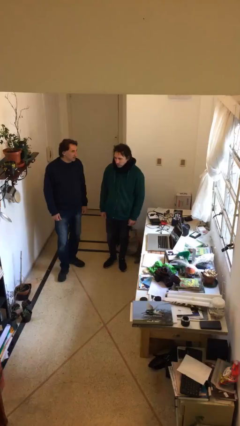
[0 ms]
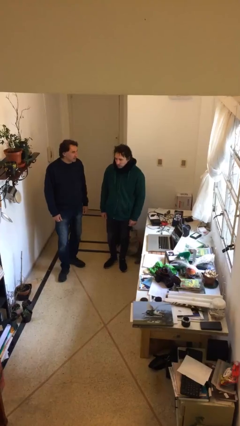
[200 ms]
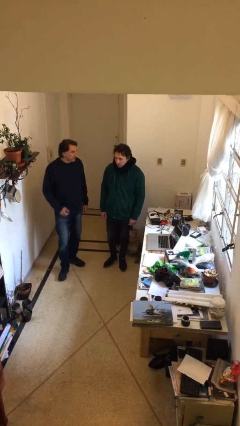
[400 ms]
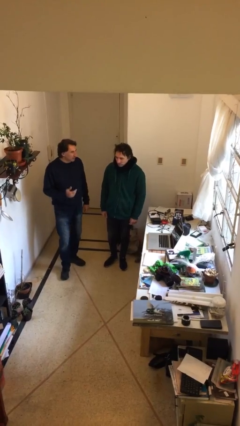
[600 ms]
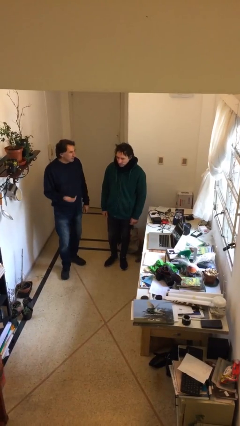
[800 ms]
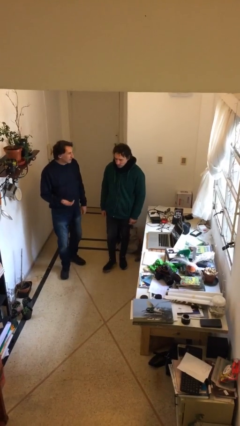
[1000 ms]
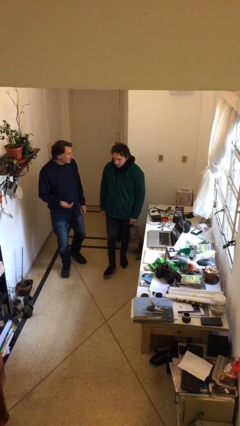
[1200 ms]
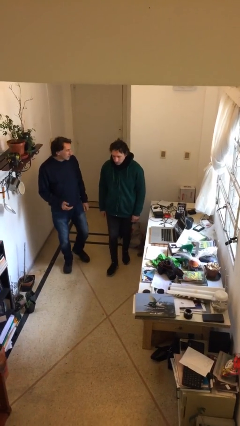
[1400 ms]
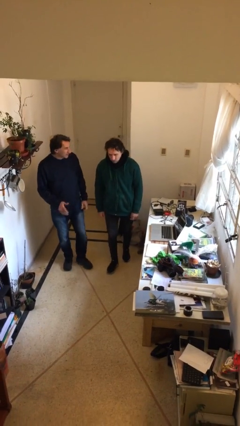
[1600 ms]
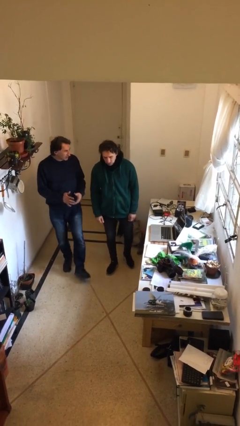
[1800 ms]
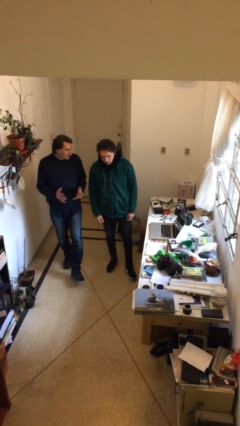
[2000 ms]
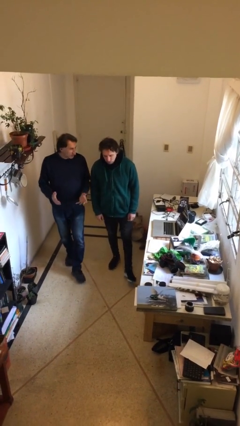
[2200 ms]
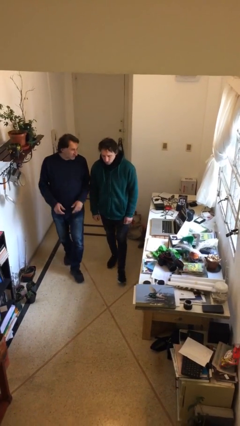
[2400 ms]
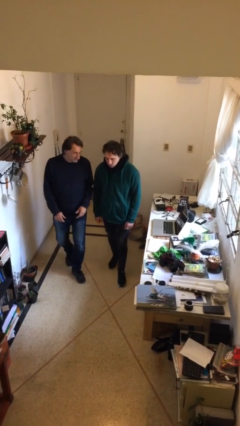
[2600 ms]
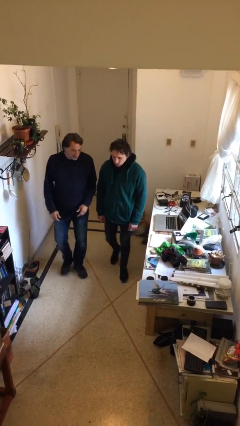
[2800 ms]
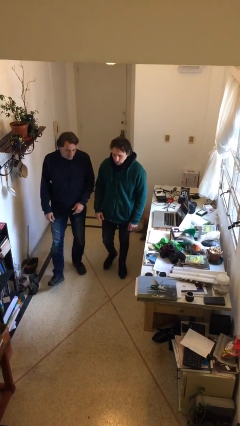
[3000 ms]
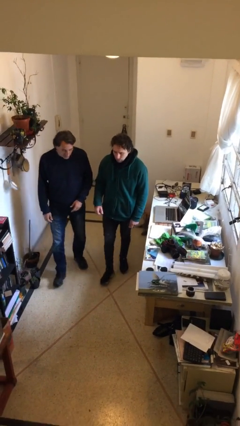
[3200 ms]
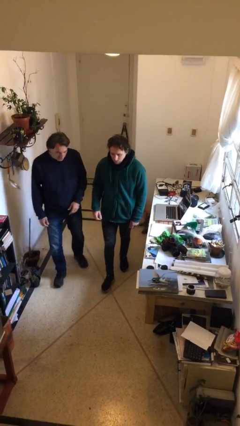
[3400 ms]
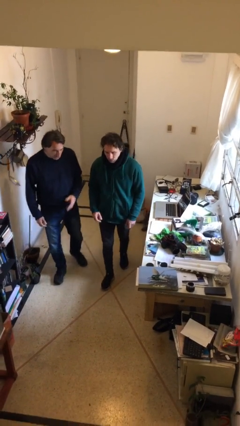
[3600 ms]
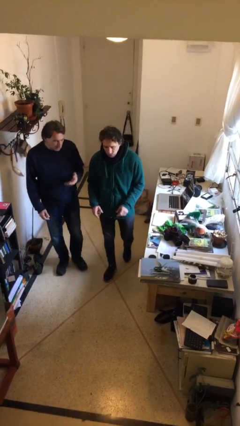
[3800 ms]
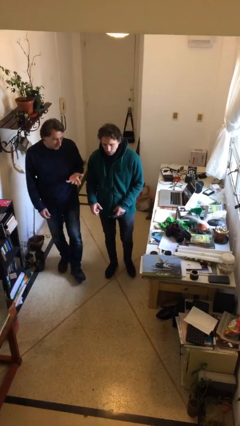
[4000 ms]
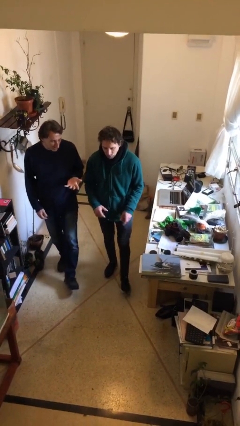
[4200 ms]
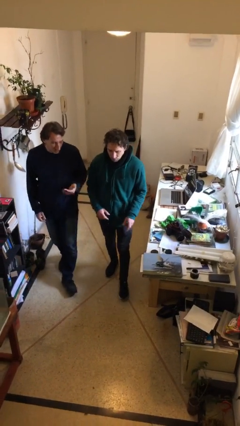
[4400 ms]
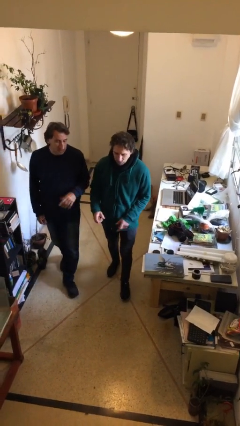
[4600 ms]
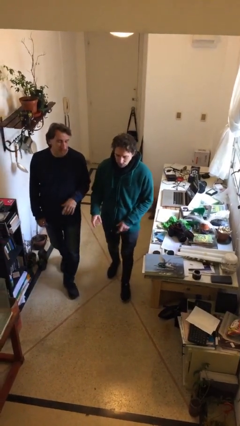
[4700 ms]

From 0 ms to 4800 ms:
person talks to person

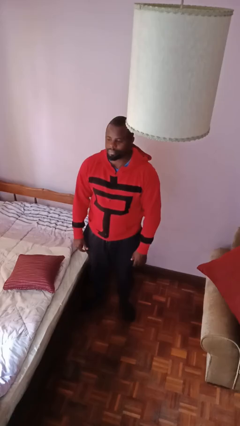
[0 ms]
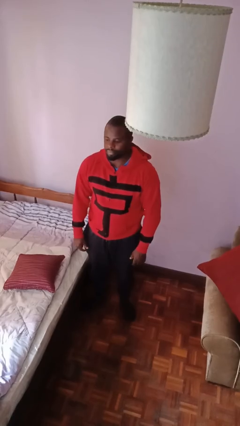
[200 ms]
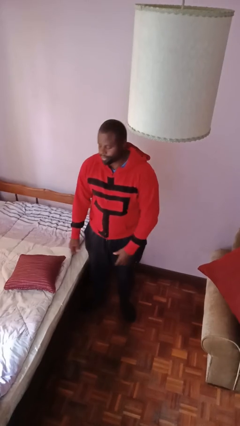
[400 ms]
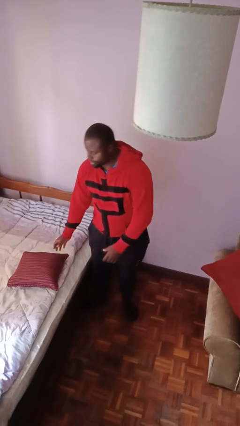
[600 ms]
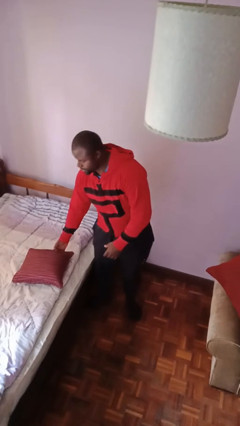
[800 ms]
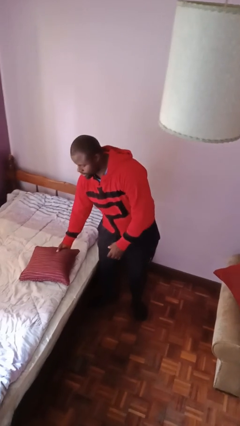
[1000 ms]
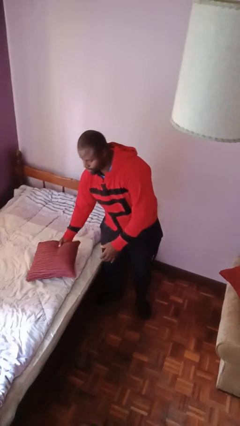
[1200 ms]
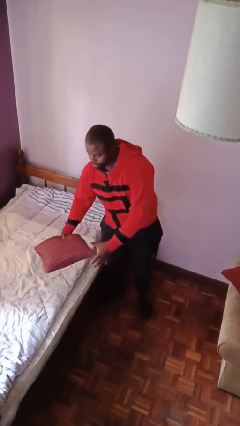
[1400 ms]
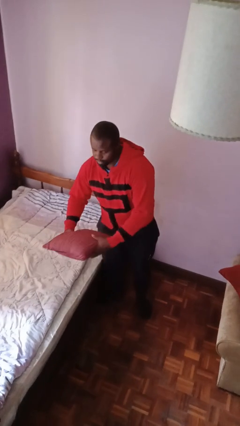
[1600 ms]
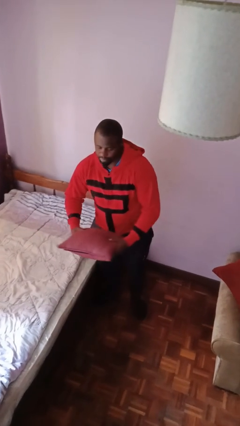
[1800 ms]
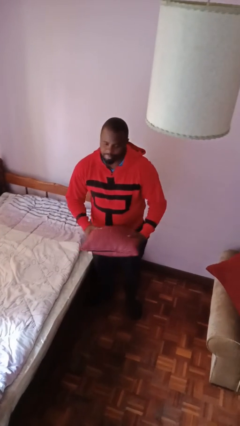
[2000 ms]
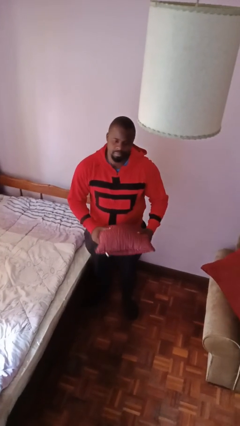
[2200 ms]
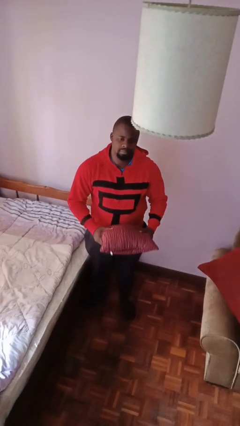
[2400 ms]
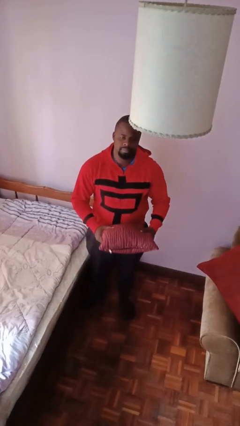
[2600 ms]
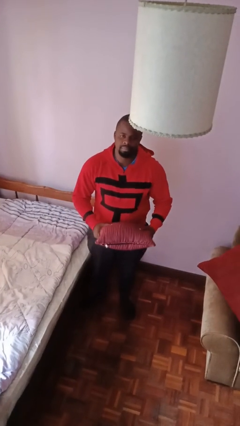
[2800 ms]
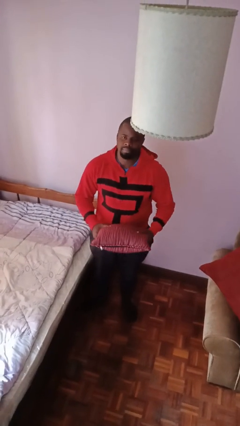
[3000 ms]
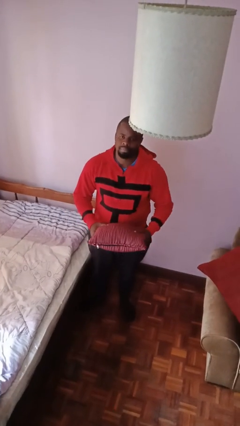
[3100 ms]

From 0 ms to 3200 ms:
person picks up object from bed

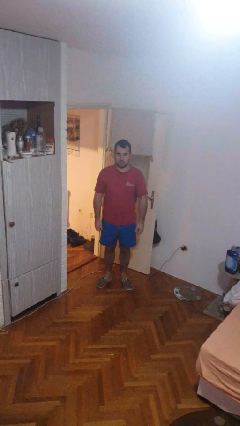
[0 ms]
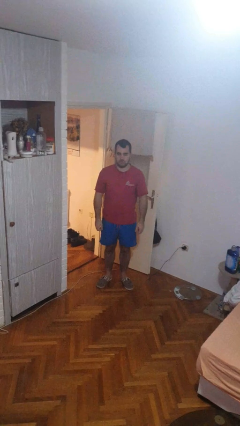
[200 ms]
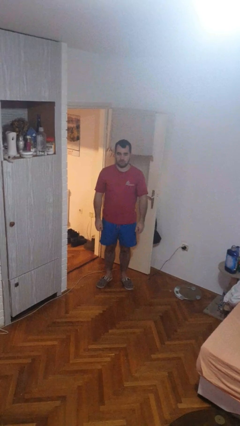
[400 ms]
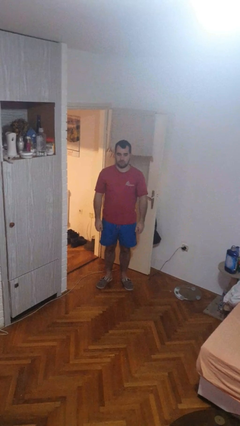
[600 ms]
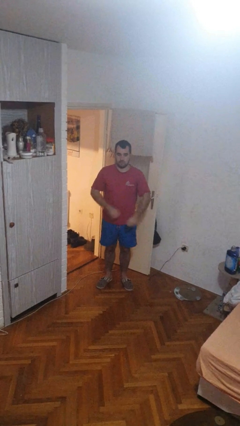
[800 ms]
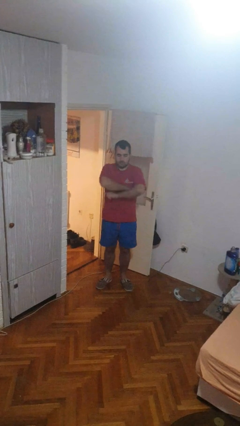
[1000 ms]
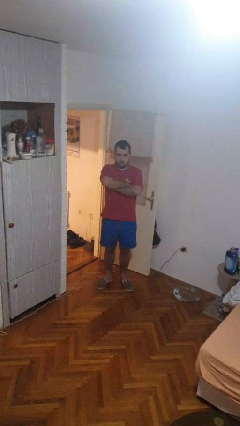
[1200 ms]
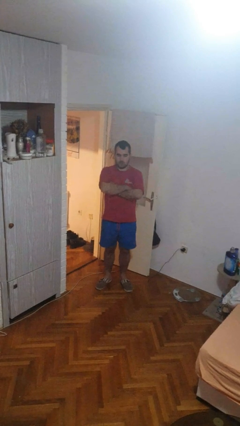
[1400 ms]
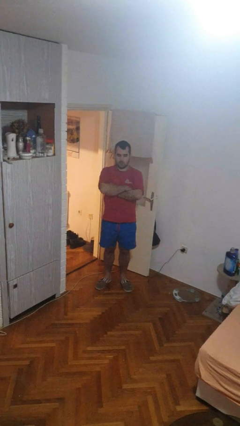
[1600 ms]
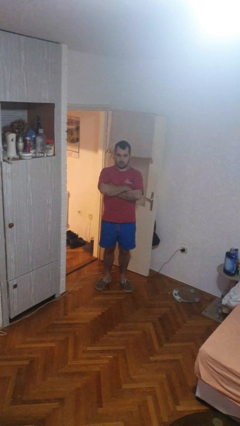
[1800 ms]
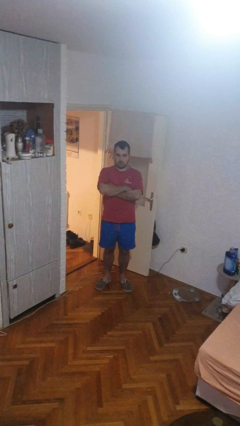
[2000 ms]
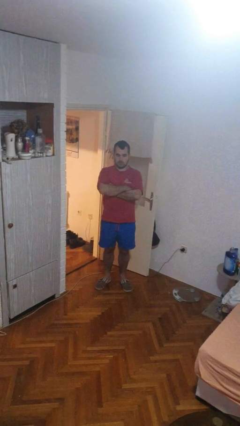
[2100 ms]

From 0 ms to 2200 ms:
person crosses arms

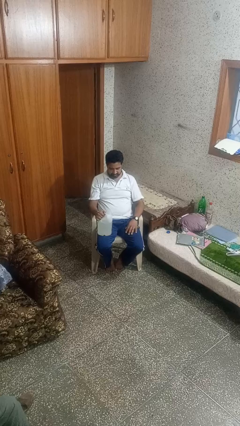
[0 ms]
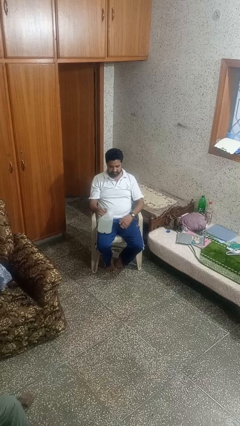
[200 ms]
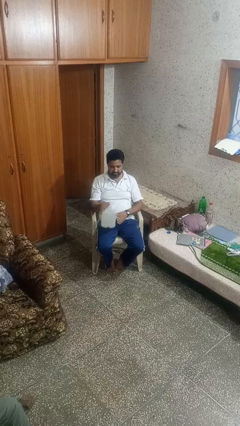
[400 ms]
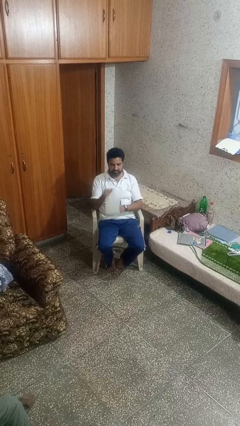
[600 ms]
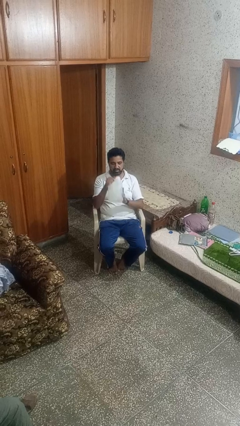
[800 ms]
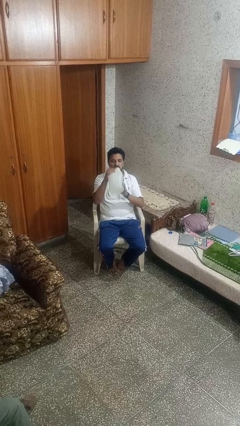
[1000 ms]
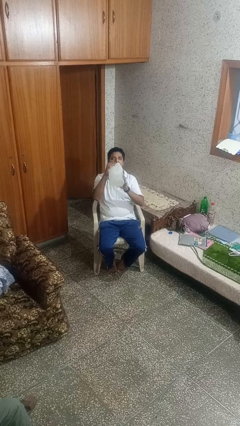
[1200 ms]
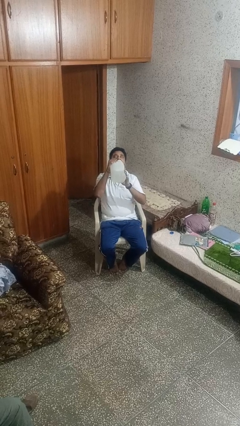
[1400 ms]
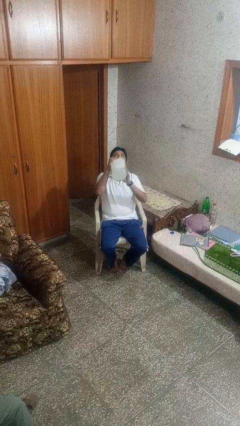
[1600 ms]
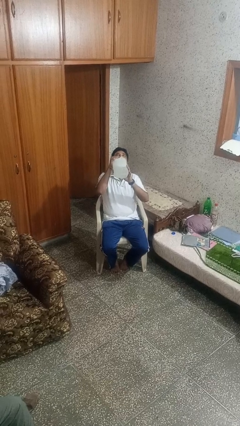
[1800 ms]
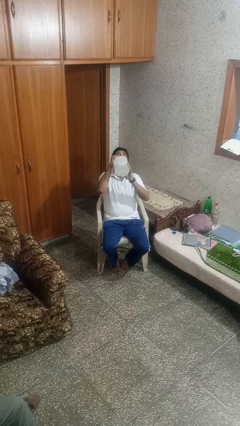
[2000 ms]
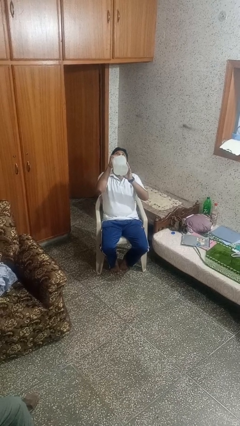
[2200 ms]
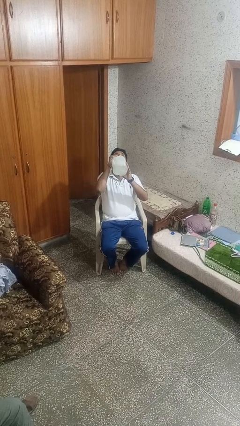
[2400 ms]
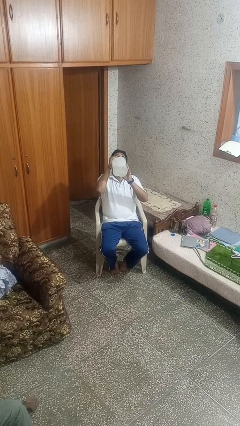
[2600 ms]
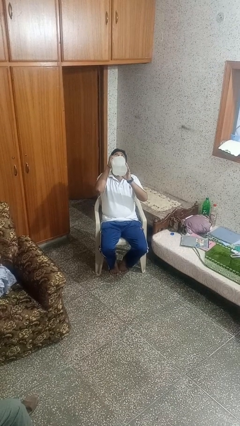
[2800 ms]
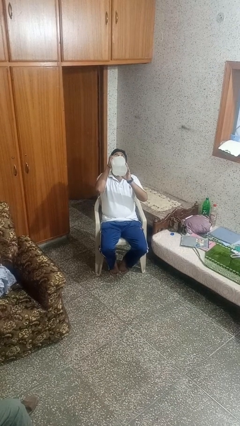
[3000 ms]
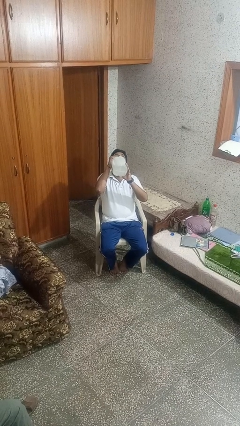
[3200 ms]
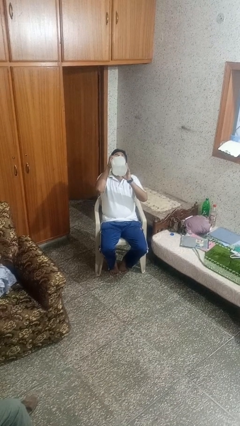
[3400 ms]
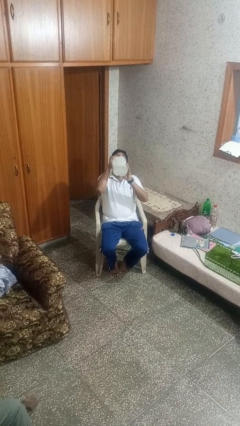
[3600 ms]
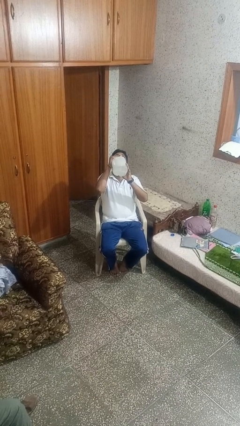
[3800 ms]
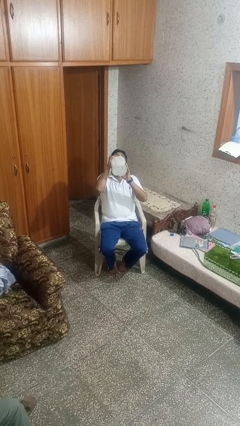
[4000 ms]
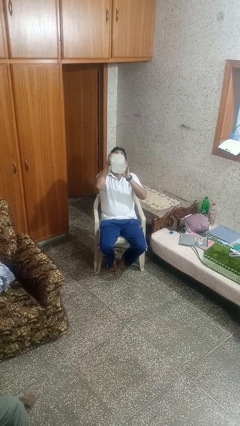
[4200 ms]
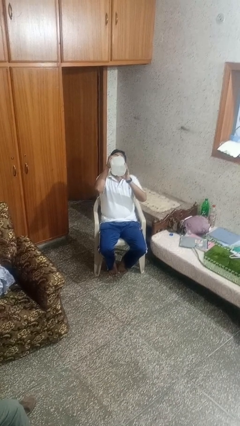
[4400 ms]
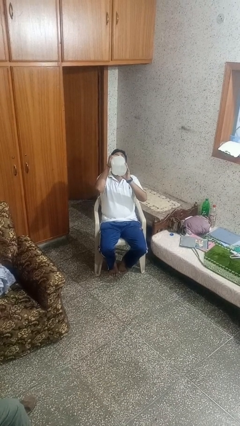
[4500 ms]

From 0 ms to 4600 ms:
person drinks from bottle

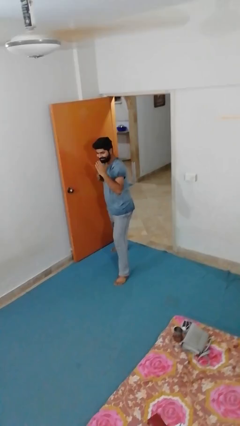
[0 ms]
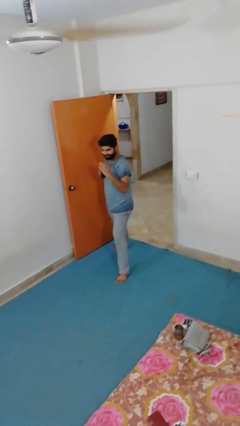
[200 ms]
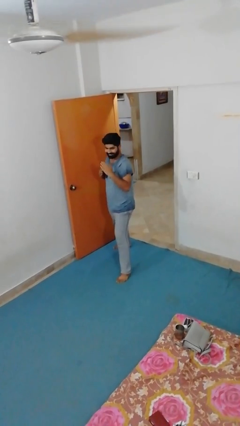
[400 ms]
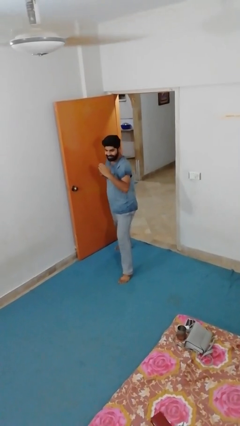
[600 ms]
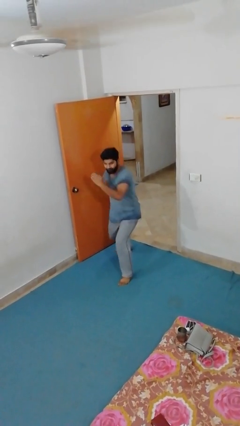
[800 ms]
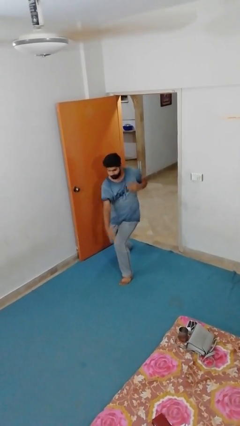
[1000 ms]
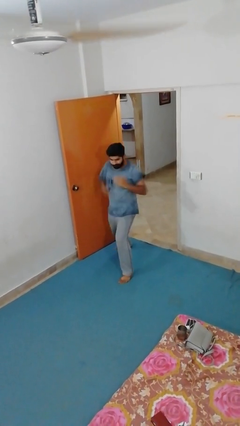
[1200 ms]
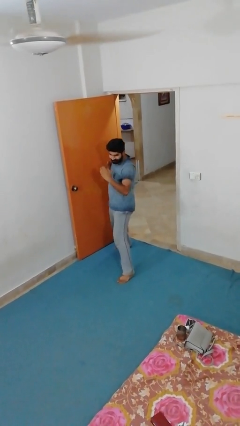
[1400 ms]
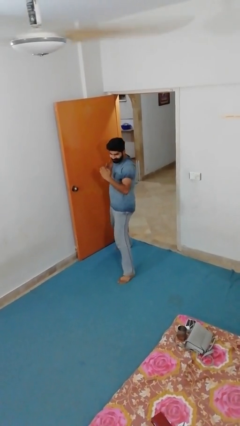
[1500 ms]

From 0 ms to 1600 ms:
person karate chop

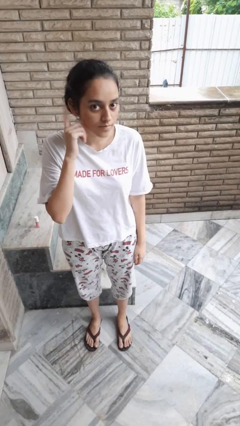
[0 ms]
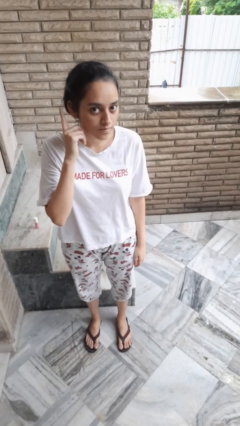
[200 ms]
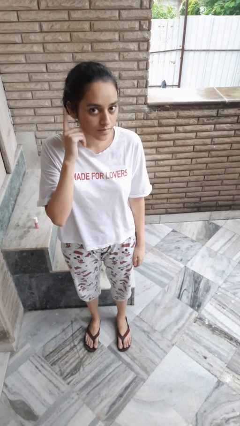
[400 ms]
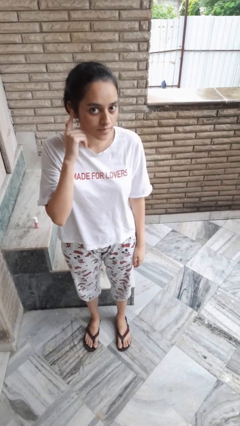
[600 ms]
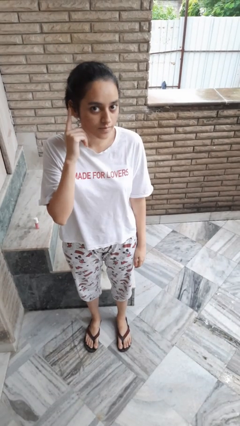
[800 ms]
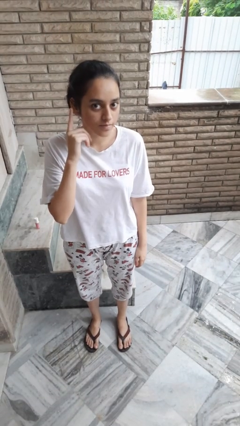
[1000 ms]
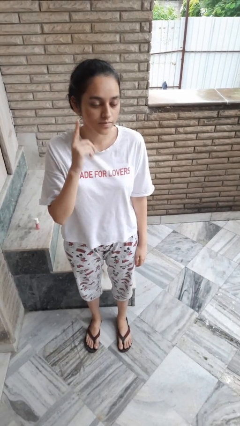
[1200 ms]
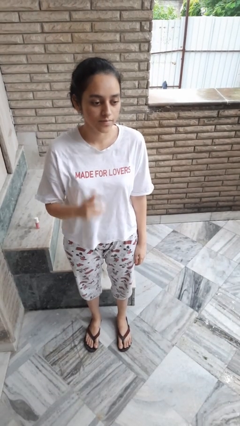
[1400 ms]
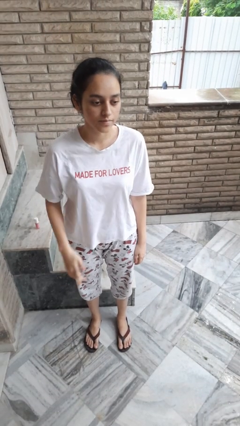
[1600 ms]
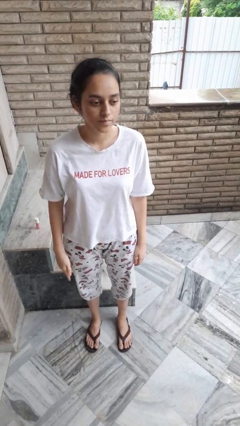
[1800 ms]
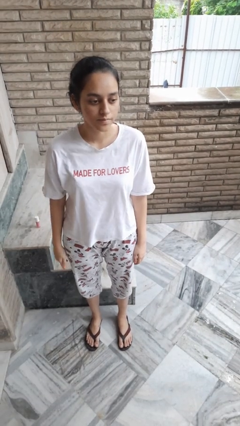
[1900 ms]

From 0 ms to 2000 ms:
person gestures listen closely
